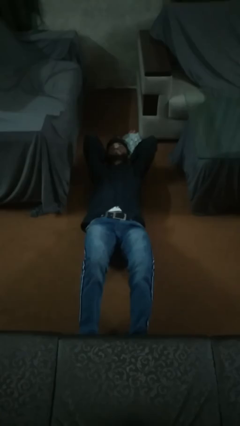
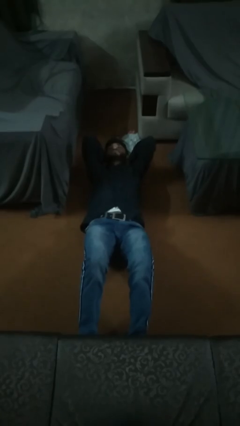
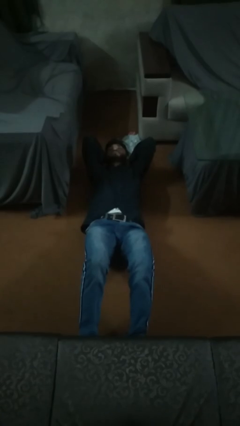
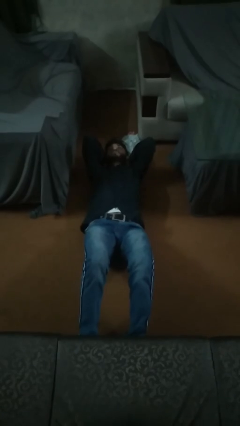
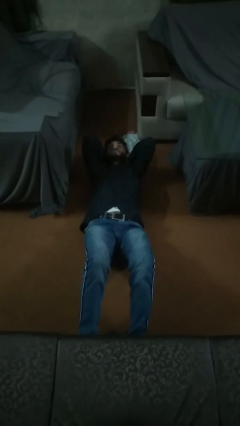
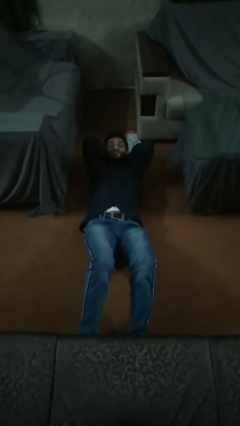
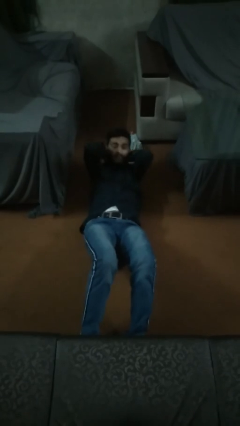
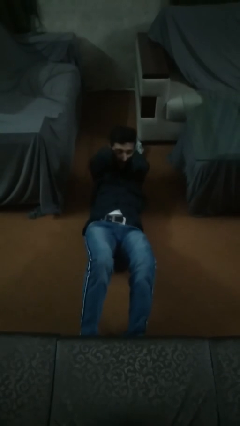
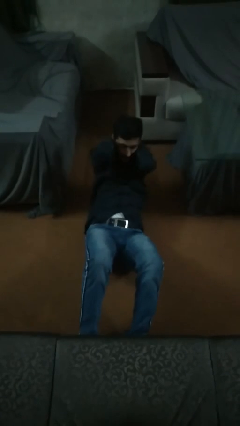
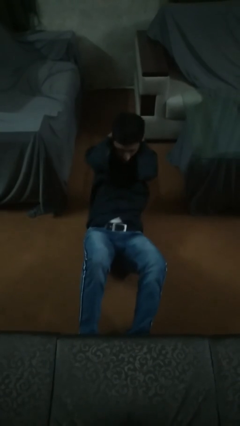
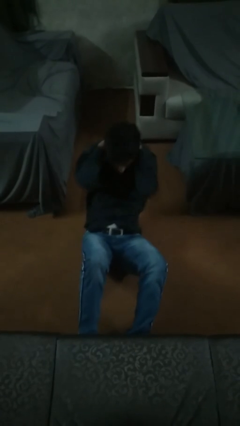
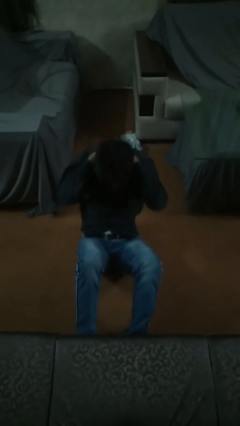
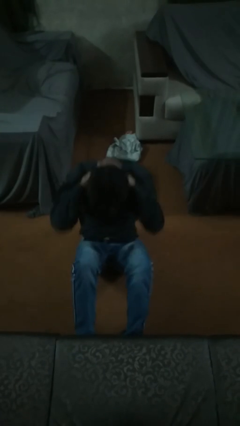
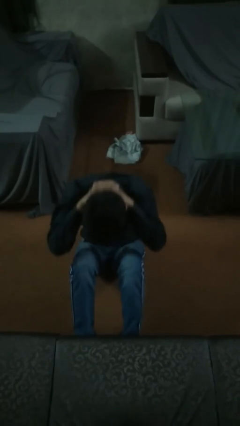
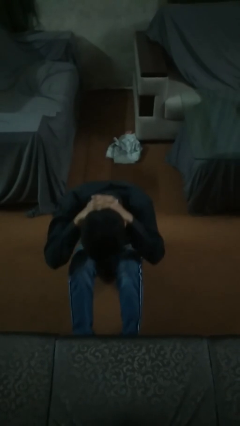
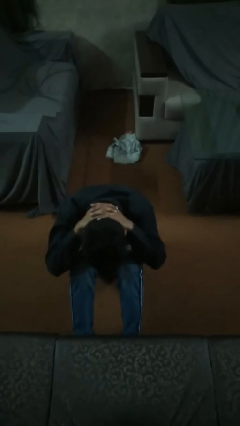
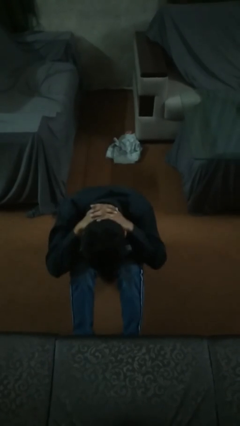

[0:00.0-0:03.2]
person exercises with situp

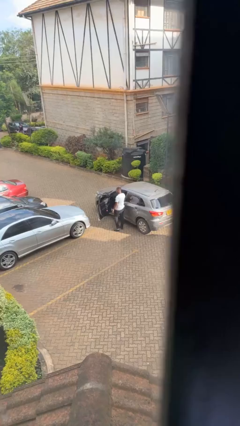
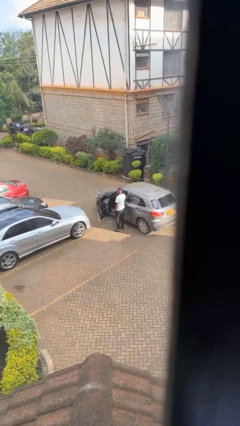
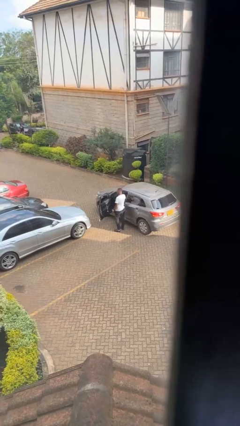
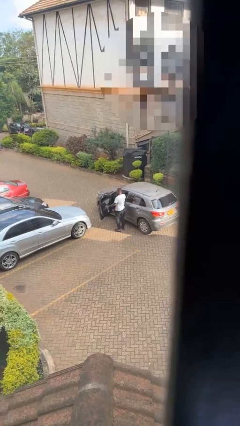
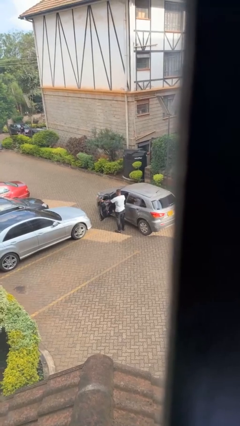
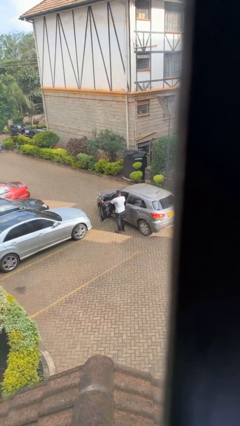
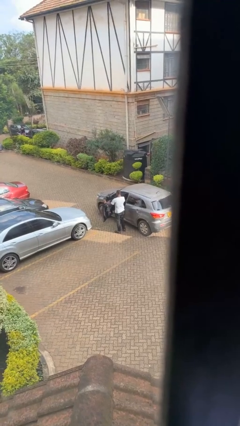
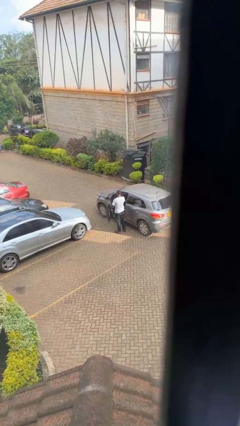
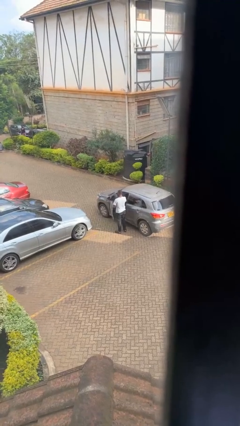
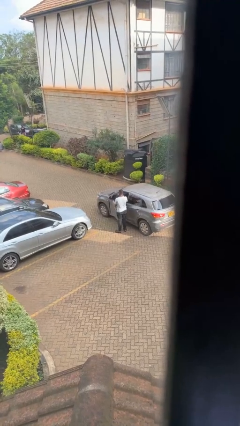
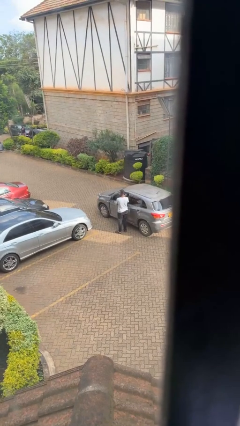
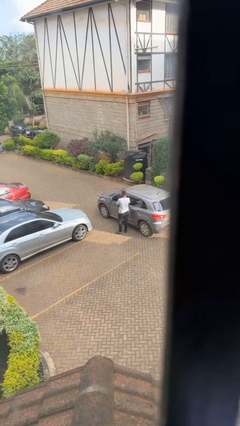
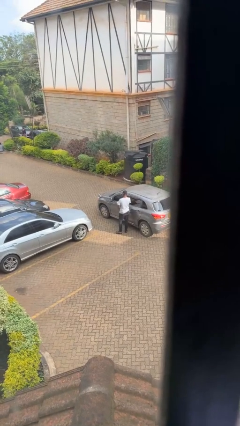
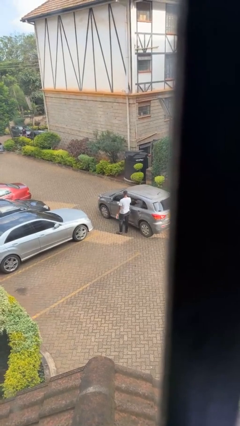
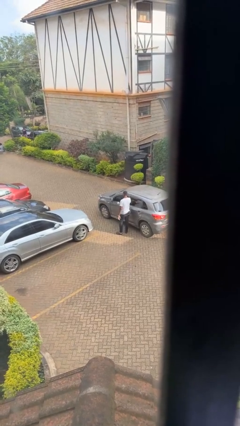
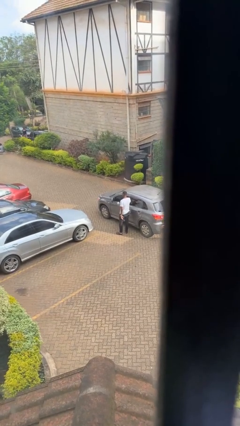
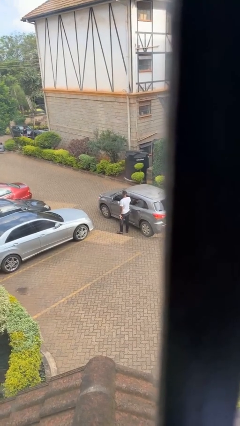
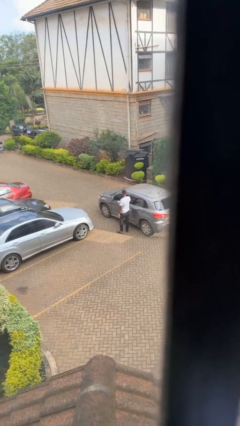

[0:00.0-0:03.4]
person closes car door

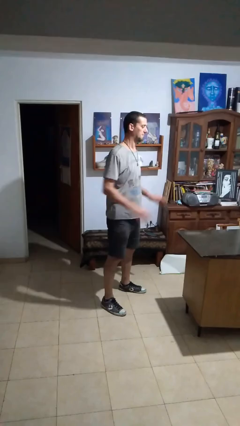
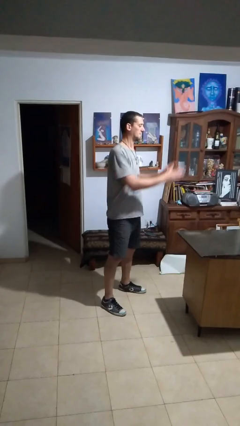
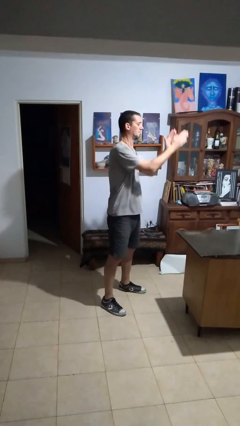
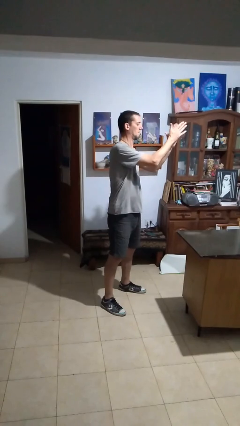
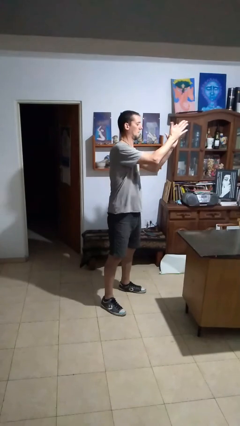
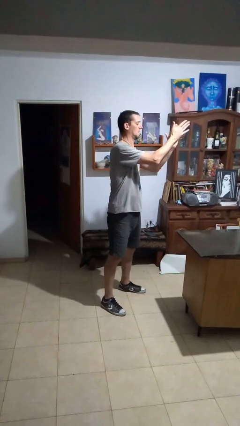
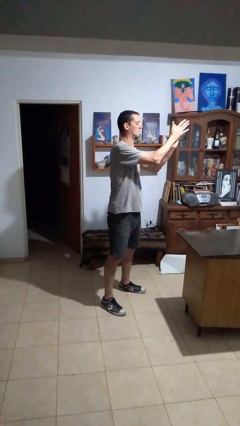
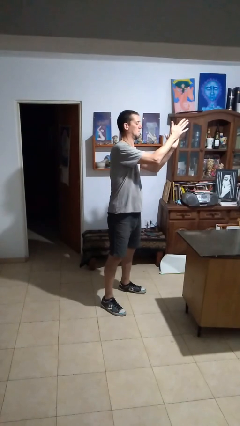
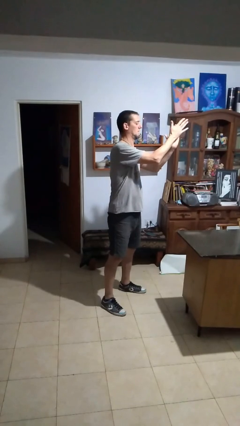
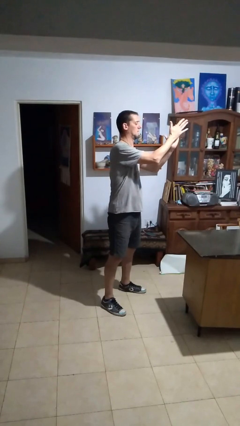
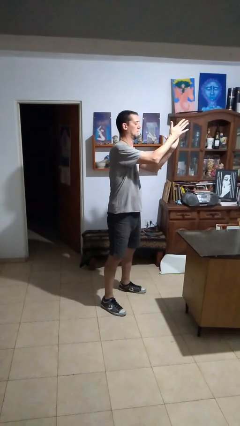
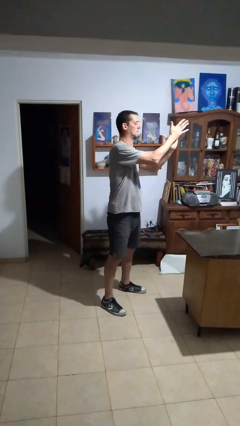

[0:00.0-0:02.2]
person claps hands

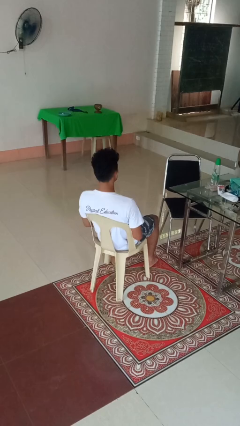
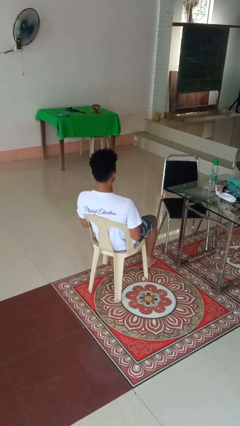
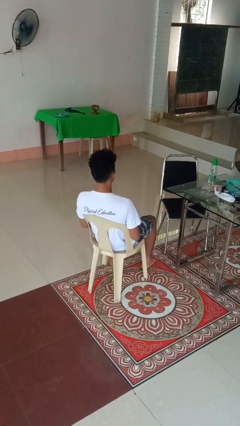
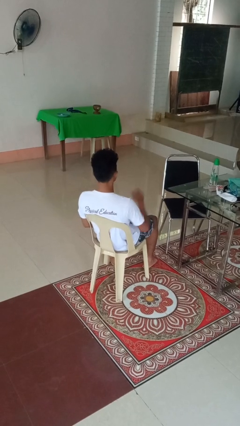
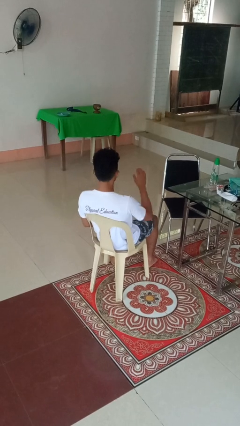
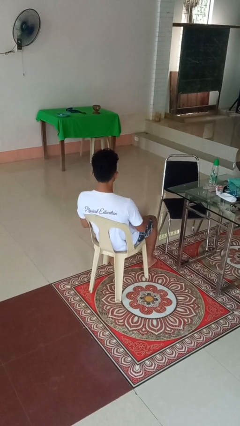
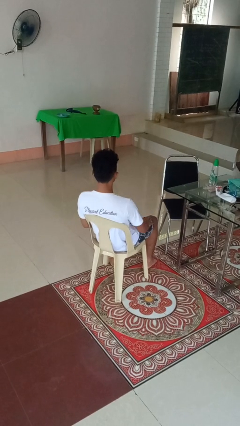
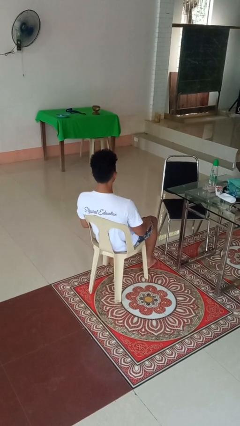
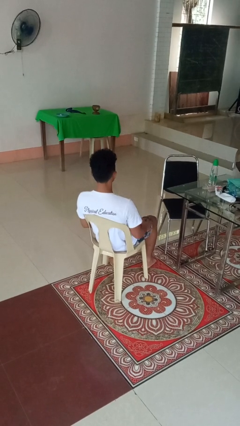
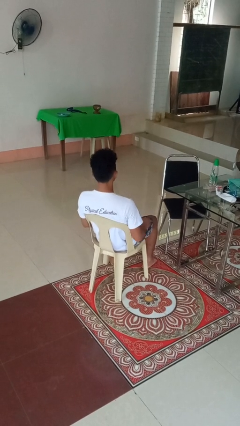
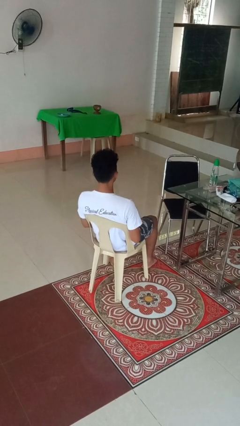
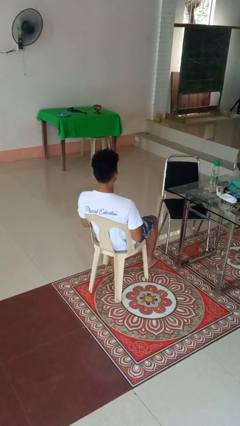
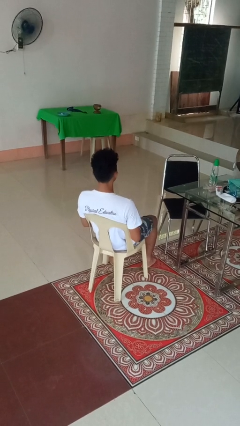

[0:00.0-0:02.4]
person slaps hands on thighs

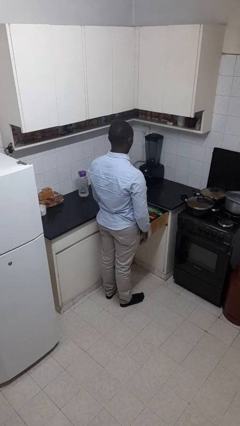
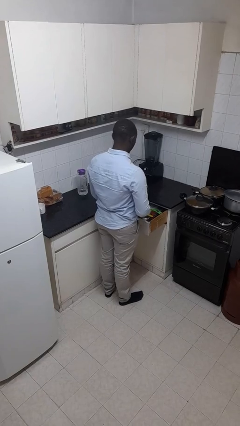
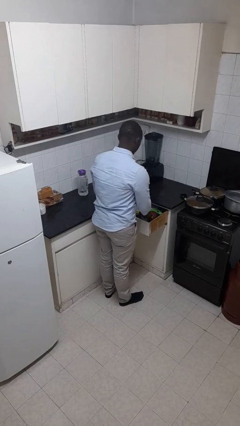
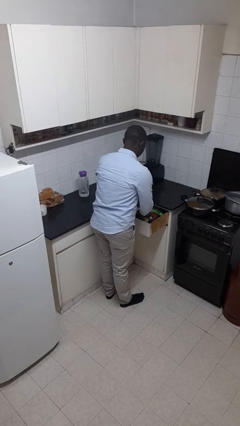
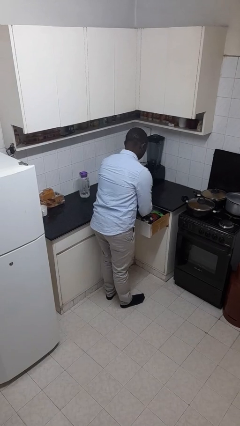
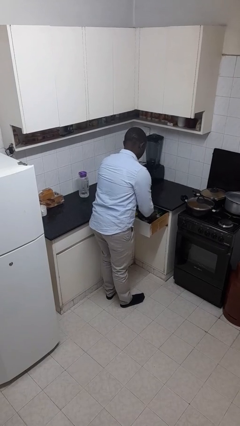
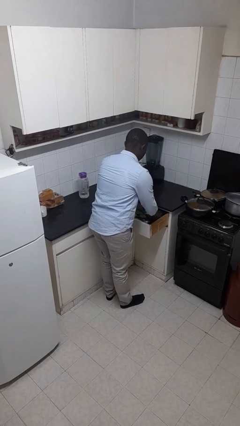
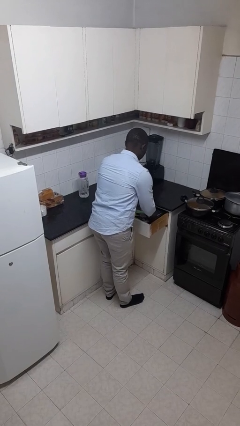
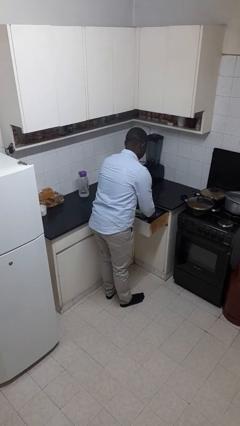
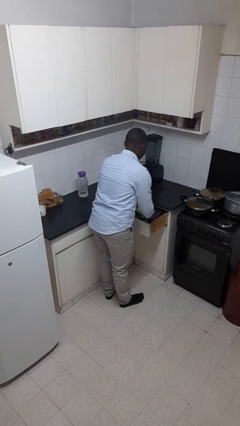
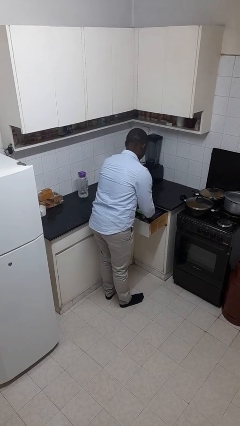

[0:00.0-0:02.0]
person searches in kitchen drawer

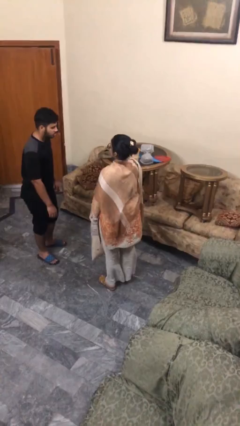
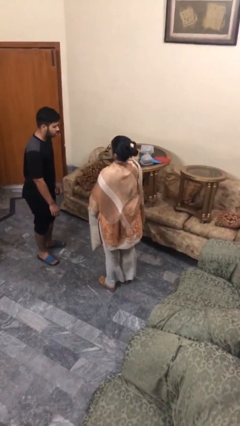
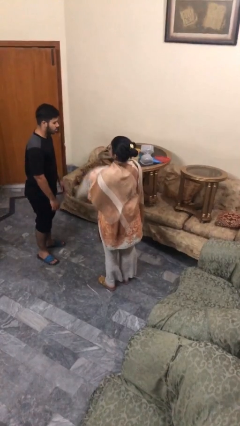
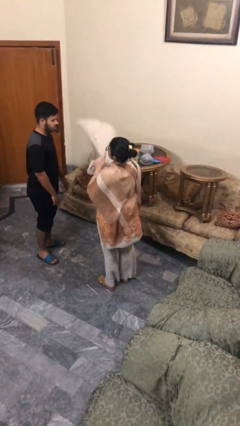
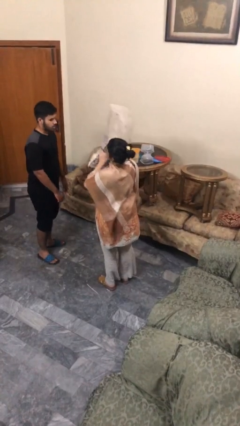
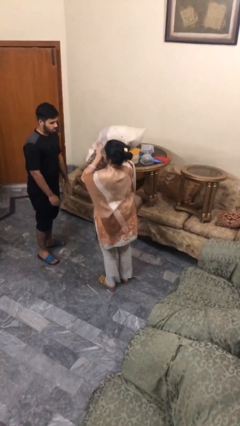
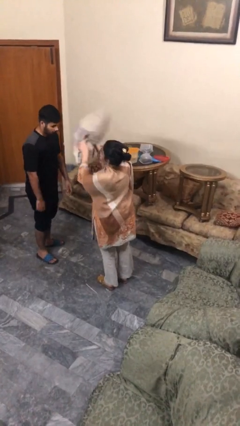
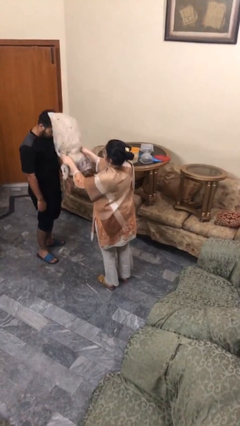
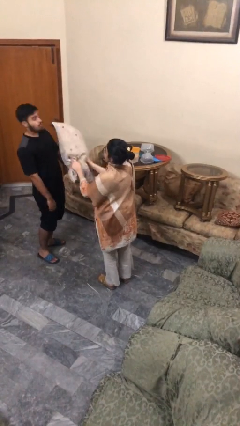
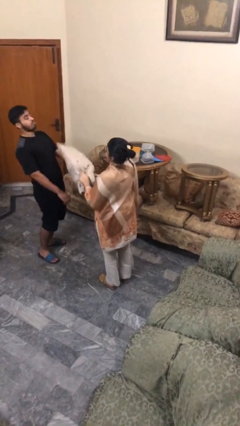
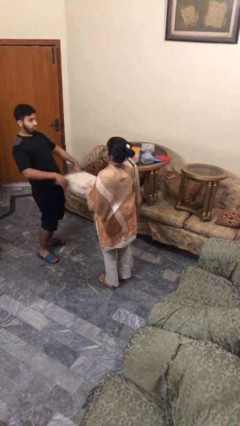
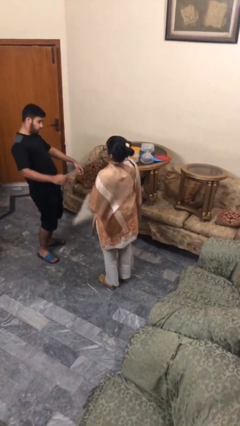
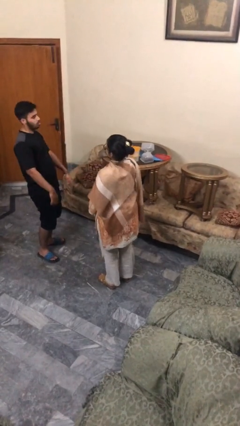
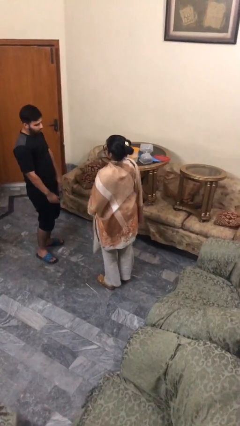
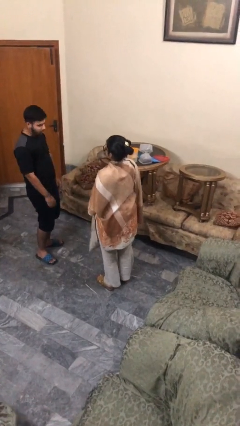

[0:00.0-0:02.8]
person hits person with pillow

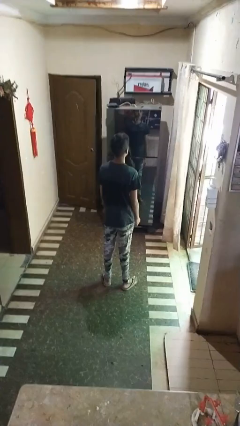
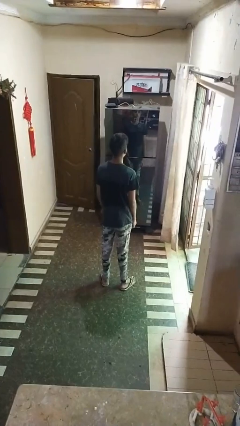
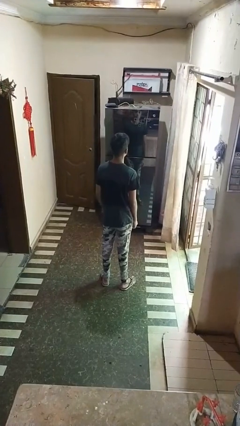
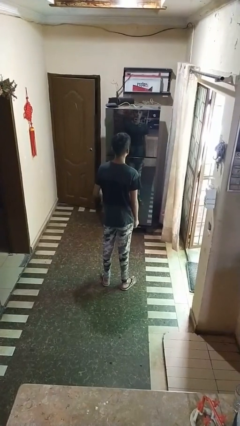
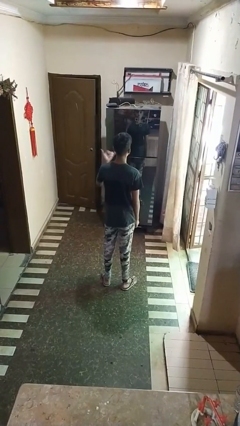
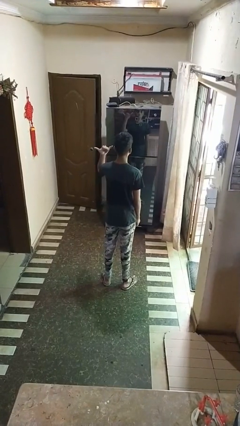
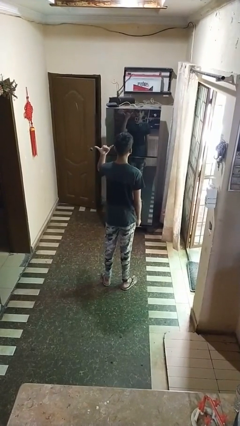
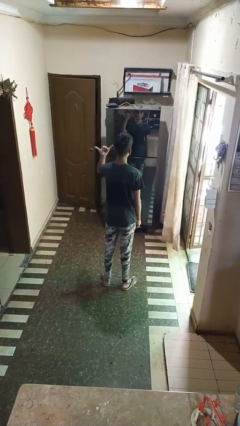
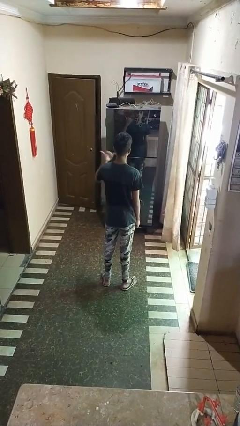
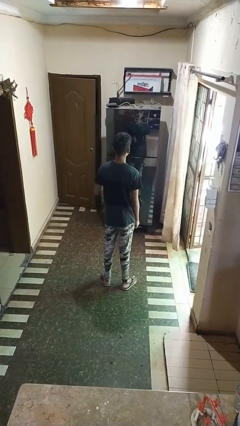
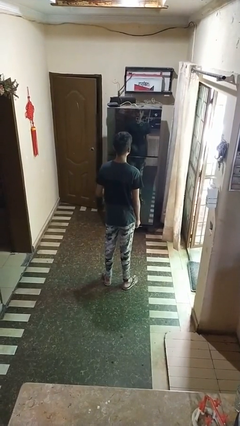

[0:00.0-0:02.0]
person gestures hang loose
